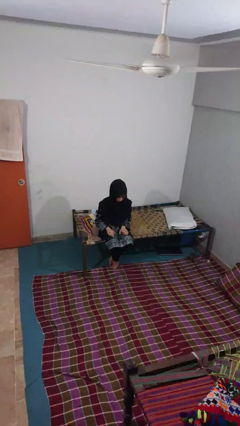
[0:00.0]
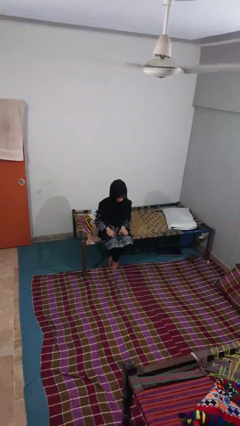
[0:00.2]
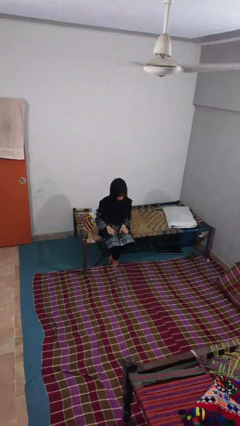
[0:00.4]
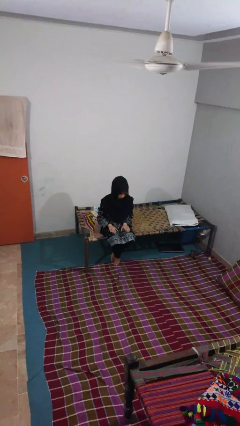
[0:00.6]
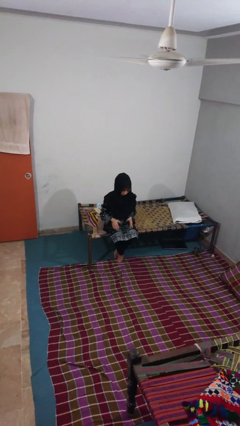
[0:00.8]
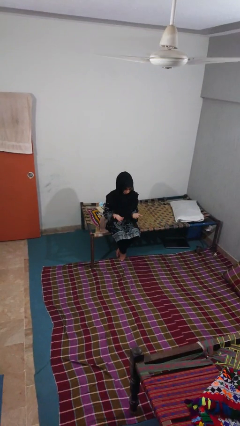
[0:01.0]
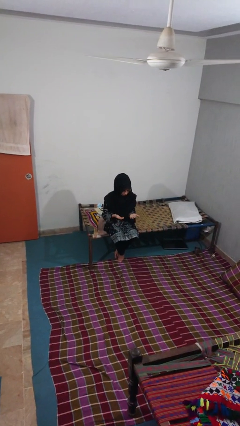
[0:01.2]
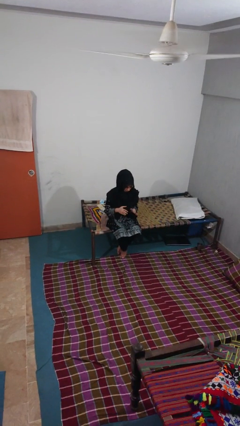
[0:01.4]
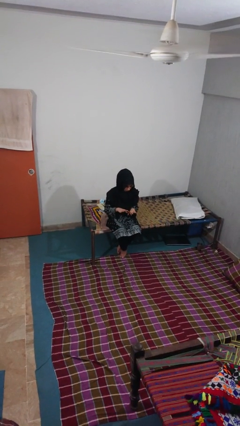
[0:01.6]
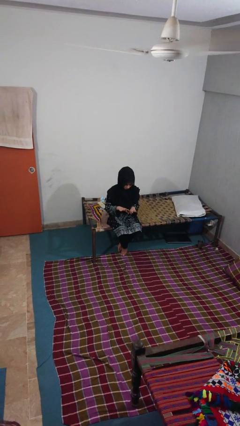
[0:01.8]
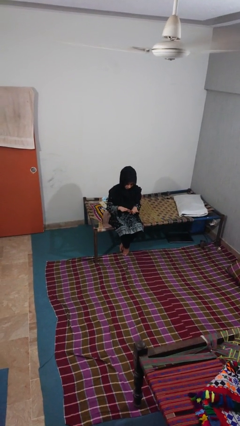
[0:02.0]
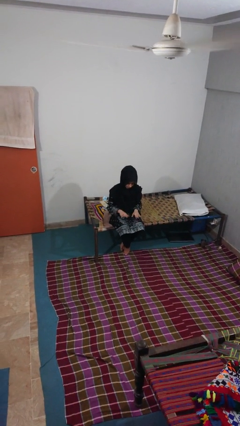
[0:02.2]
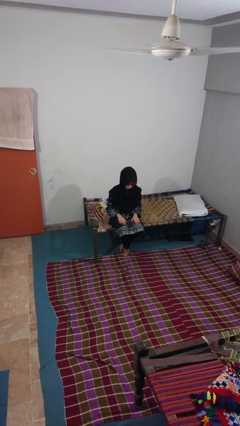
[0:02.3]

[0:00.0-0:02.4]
person looks at hands in lap

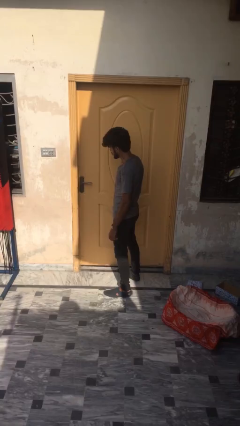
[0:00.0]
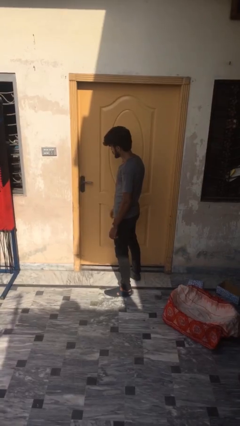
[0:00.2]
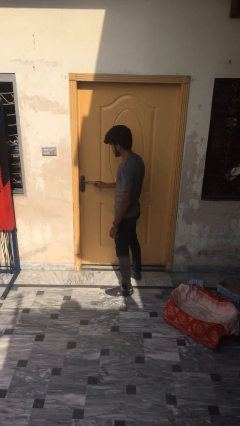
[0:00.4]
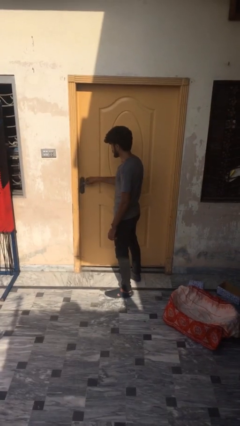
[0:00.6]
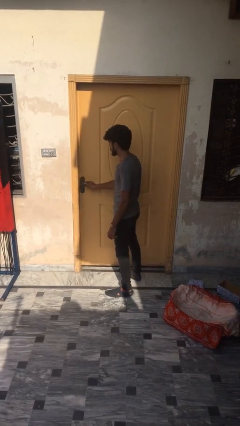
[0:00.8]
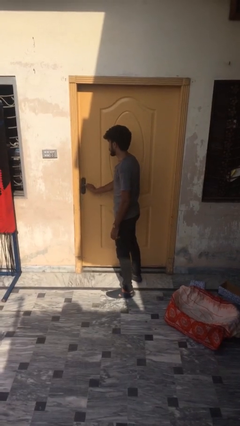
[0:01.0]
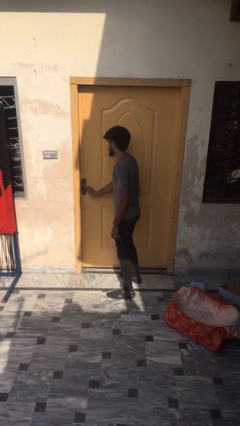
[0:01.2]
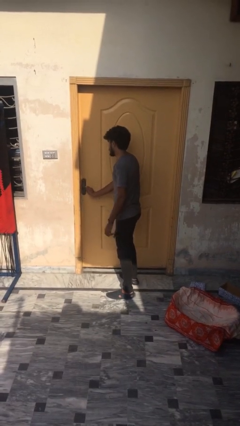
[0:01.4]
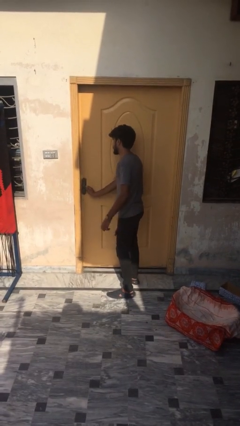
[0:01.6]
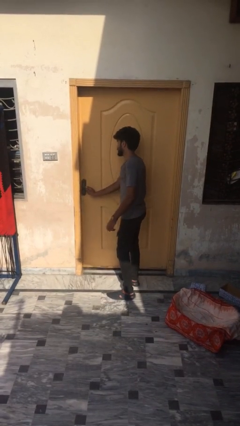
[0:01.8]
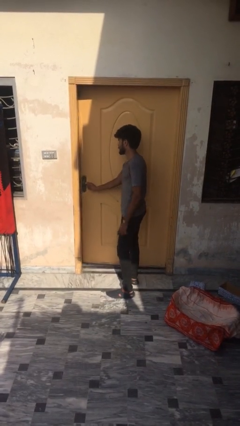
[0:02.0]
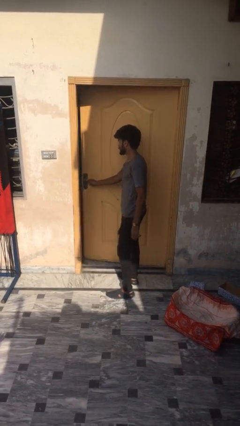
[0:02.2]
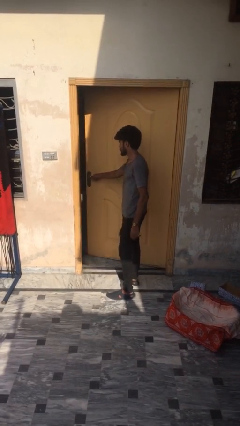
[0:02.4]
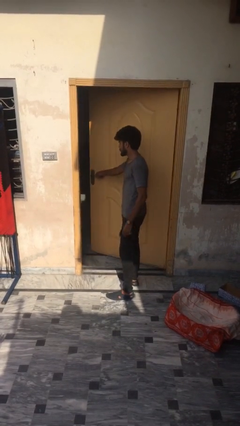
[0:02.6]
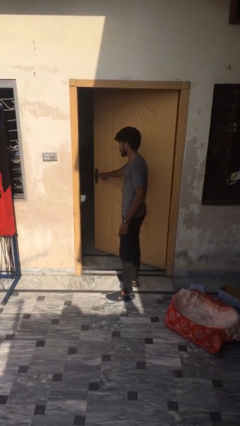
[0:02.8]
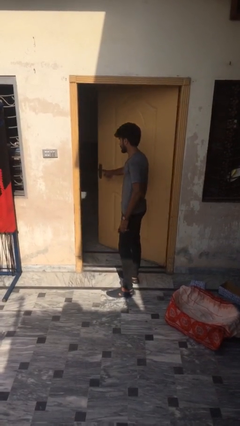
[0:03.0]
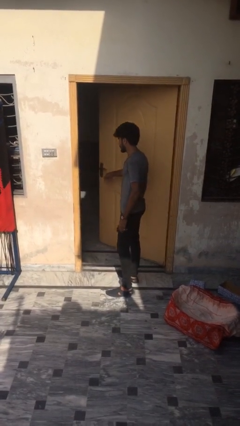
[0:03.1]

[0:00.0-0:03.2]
person opens facility door

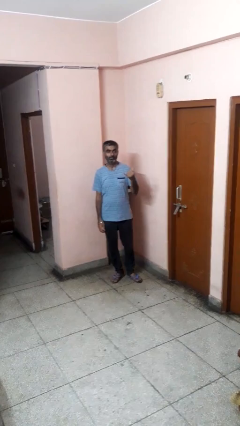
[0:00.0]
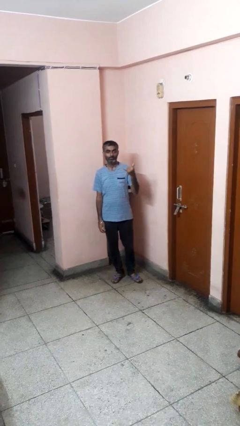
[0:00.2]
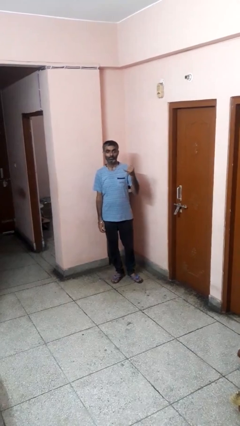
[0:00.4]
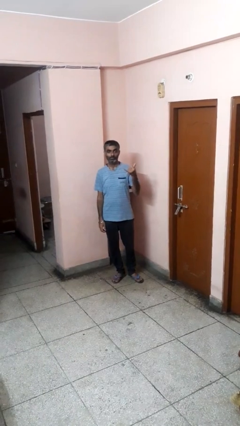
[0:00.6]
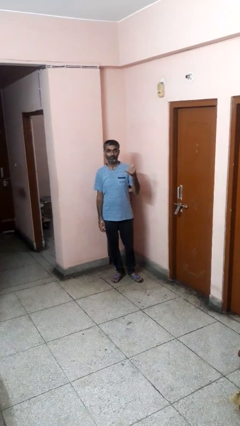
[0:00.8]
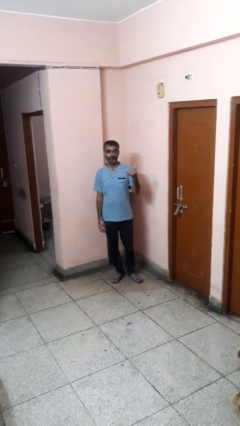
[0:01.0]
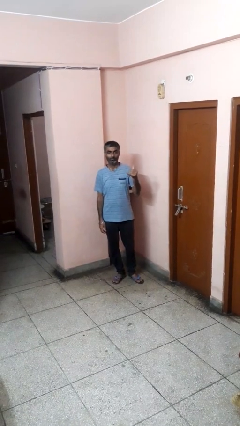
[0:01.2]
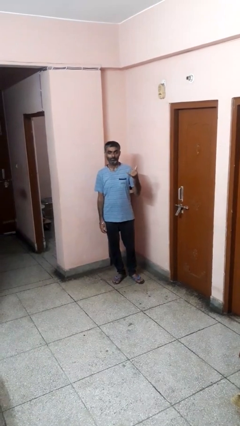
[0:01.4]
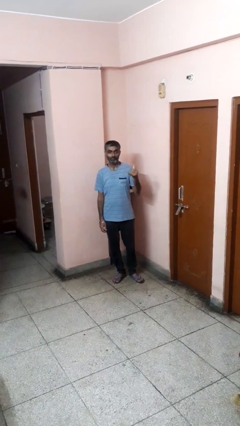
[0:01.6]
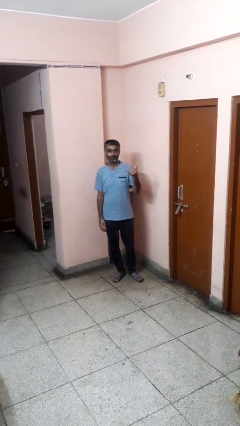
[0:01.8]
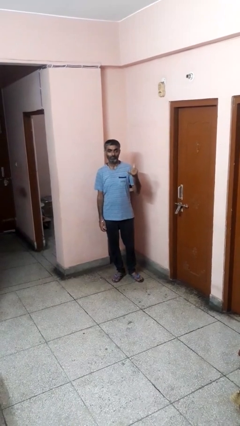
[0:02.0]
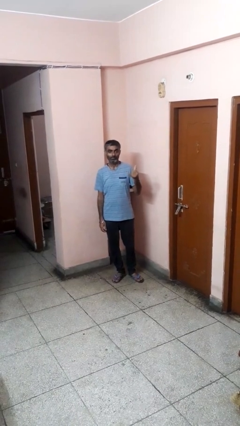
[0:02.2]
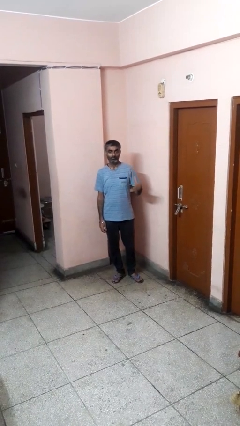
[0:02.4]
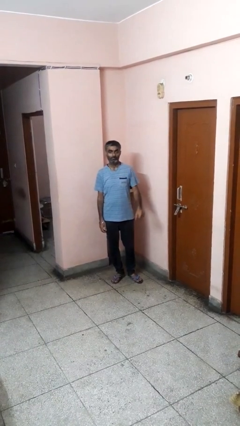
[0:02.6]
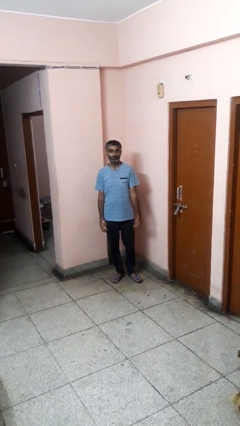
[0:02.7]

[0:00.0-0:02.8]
person gestures hang loose

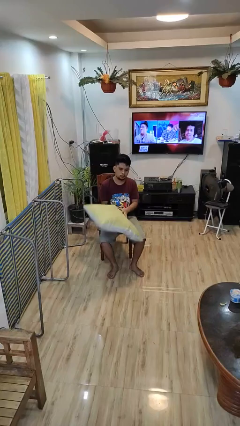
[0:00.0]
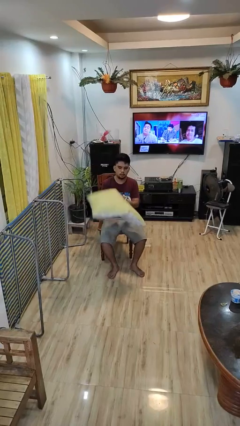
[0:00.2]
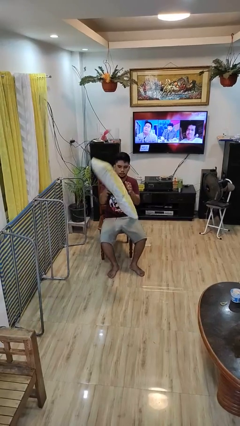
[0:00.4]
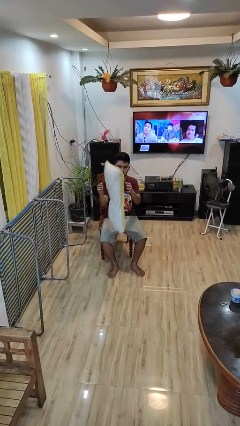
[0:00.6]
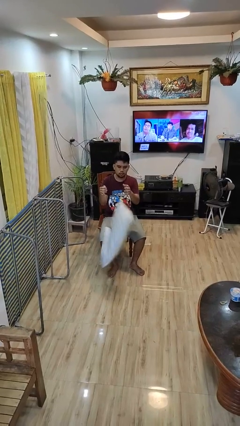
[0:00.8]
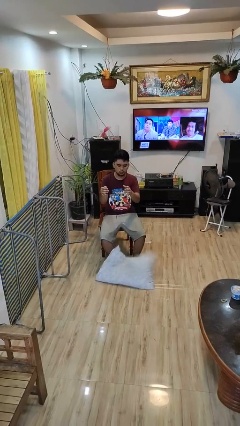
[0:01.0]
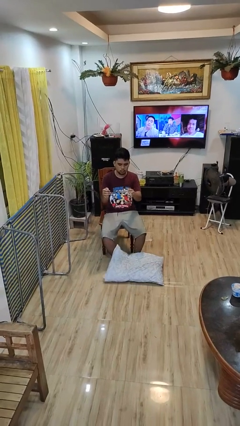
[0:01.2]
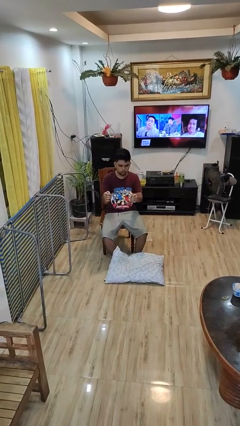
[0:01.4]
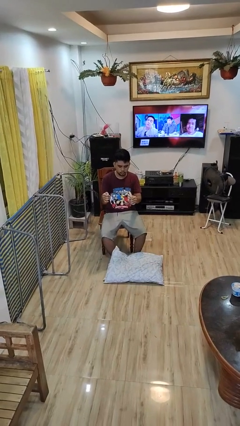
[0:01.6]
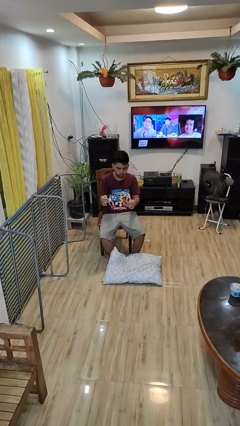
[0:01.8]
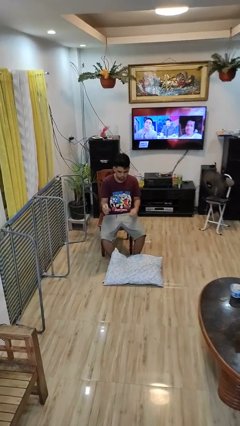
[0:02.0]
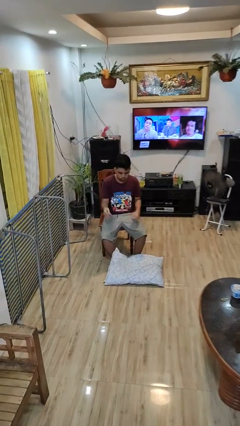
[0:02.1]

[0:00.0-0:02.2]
person drops object

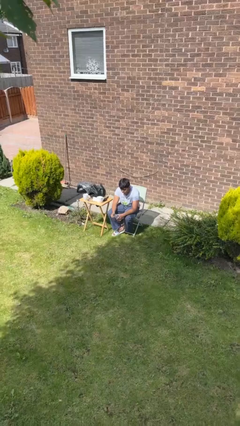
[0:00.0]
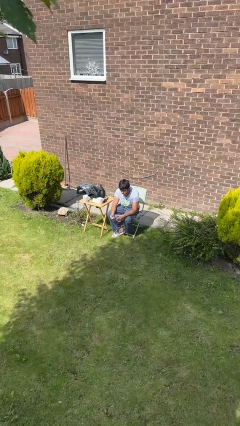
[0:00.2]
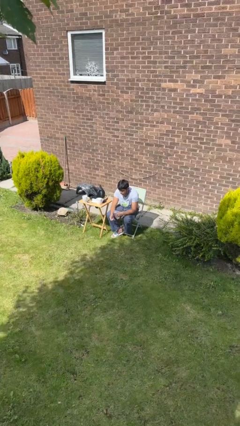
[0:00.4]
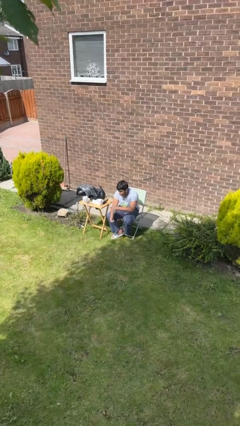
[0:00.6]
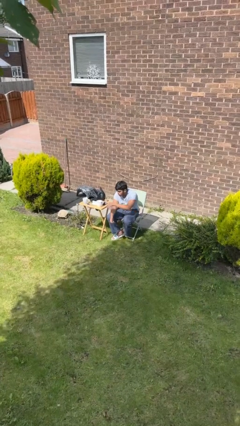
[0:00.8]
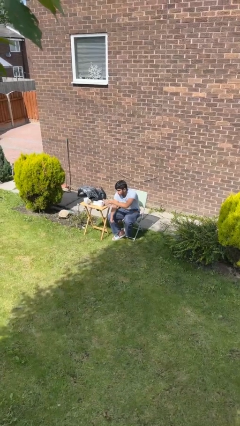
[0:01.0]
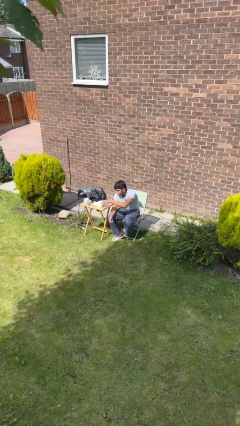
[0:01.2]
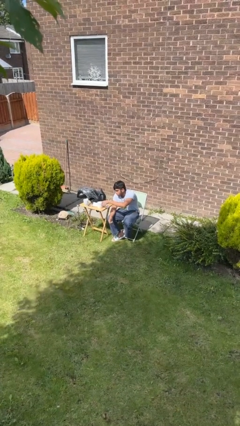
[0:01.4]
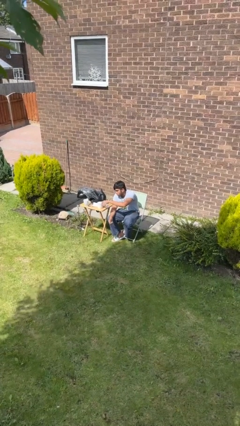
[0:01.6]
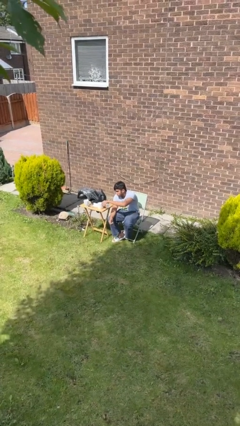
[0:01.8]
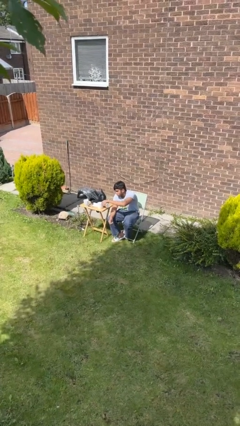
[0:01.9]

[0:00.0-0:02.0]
person pours liquid into cup

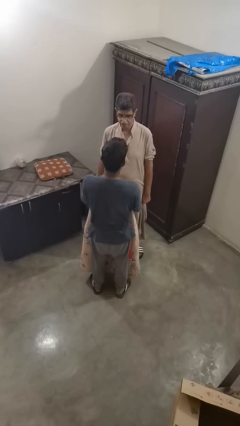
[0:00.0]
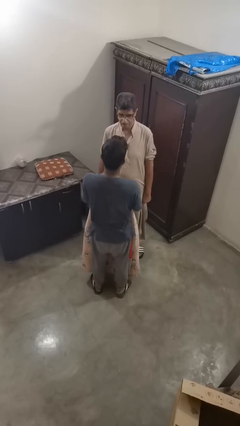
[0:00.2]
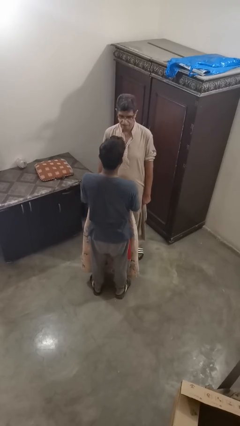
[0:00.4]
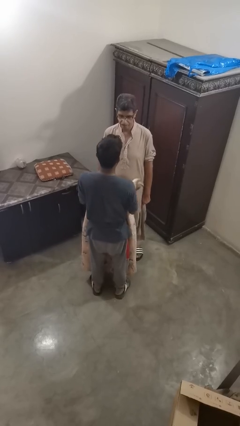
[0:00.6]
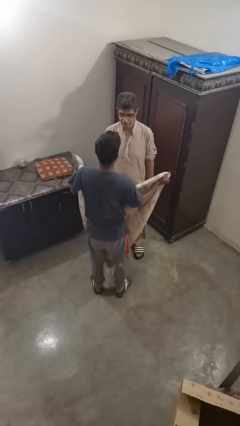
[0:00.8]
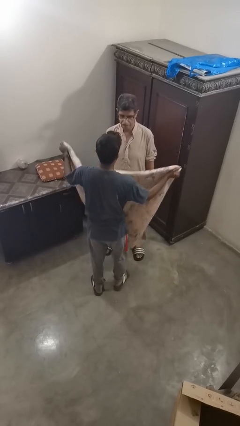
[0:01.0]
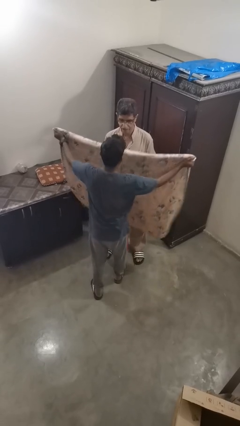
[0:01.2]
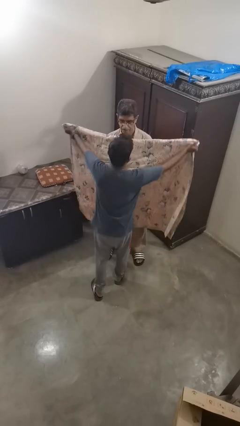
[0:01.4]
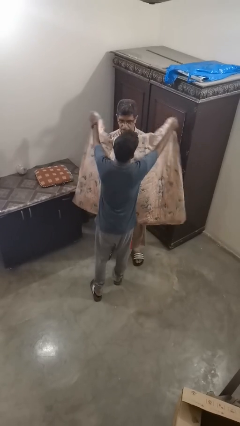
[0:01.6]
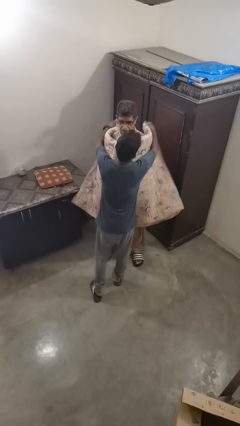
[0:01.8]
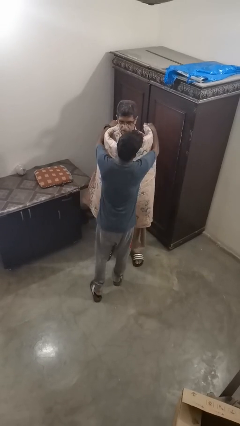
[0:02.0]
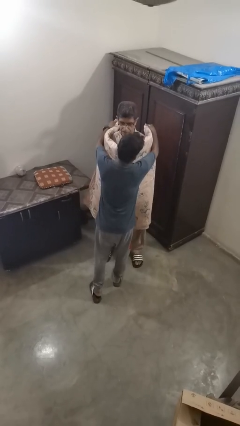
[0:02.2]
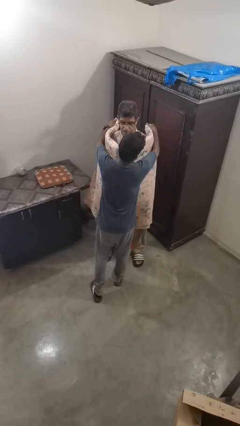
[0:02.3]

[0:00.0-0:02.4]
person covers friend with blanket

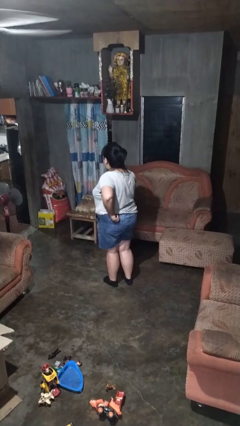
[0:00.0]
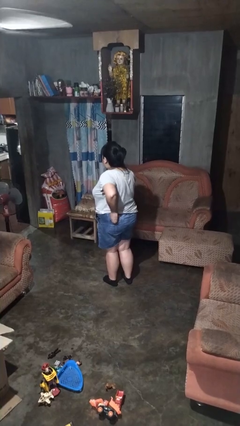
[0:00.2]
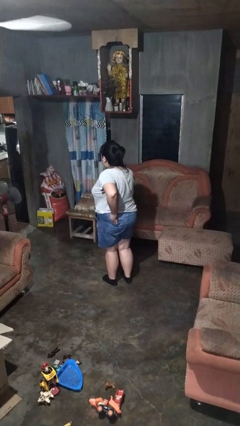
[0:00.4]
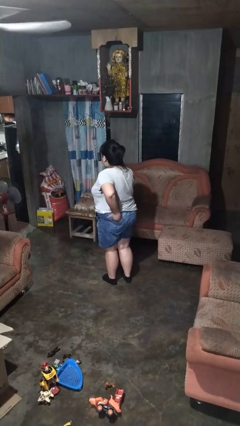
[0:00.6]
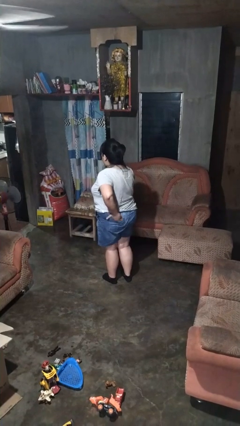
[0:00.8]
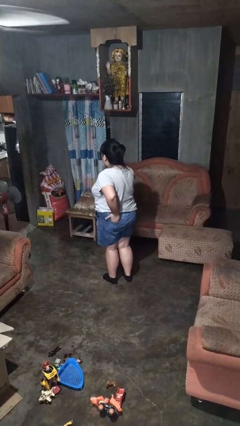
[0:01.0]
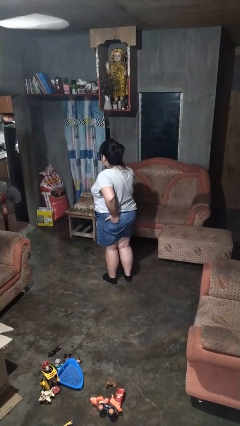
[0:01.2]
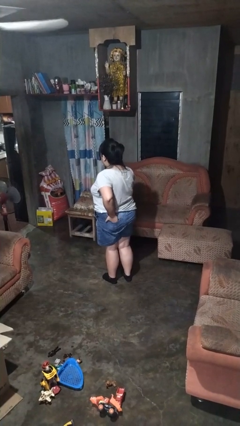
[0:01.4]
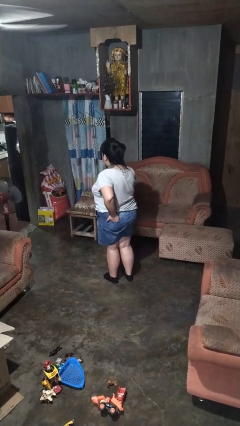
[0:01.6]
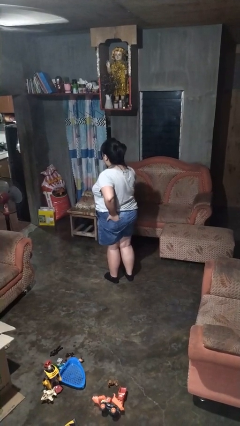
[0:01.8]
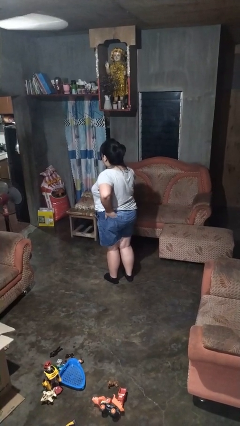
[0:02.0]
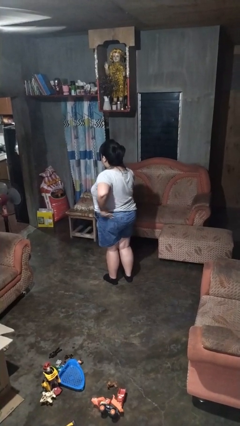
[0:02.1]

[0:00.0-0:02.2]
person puts hands in back pockets
